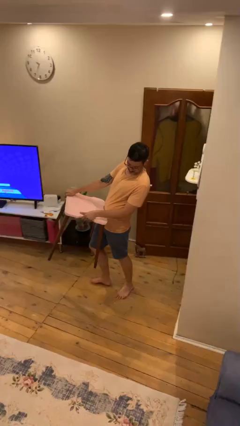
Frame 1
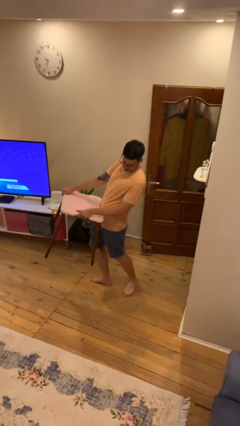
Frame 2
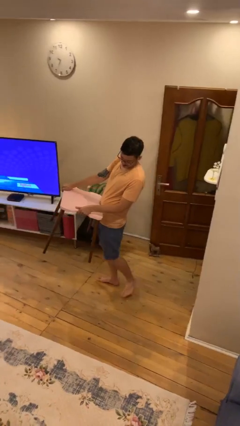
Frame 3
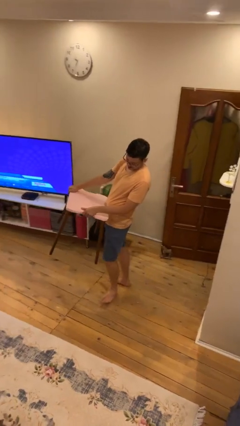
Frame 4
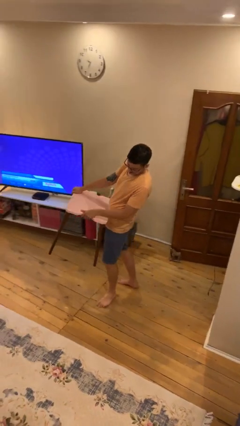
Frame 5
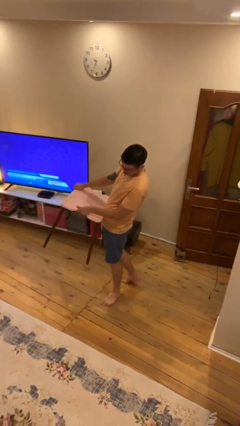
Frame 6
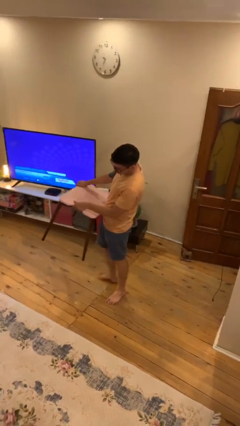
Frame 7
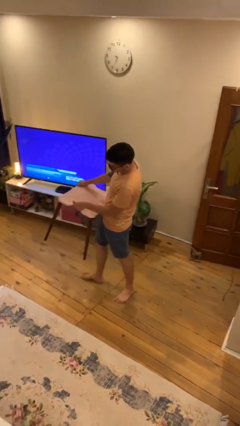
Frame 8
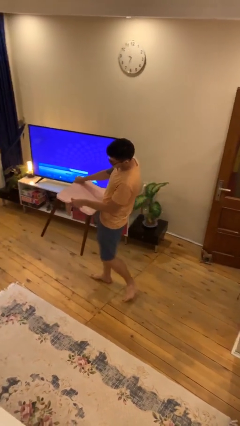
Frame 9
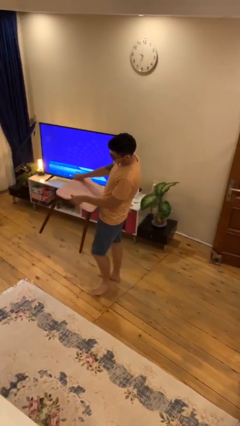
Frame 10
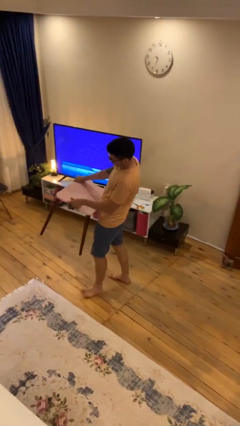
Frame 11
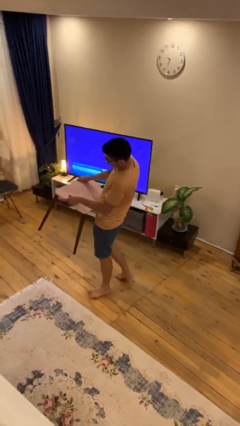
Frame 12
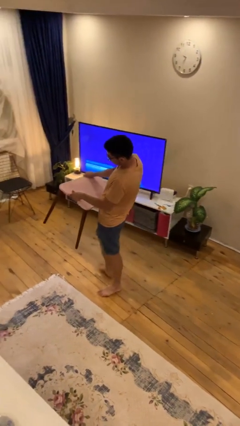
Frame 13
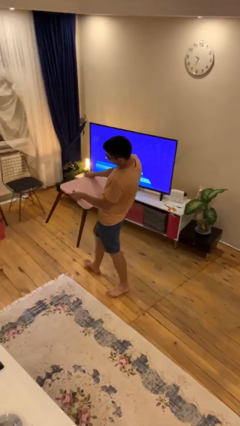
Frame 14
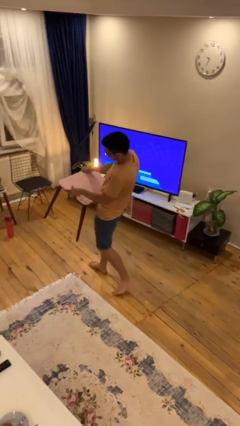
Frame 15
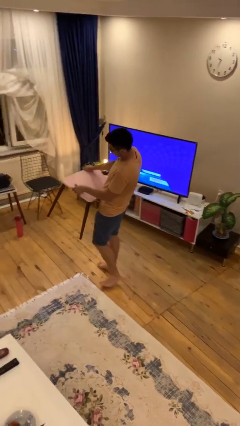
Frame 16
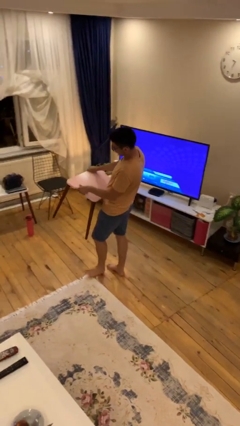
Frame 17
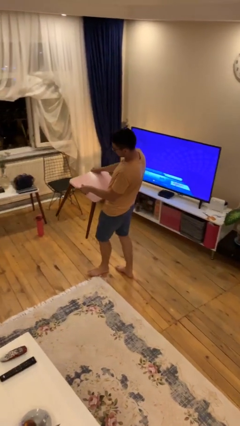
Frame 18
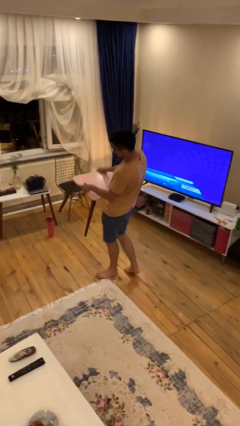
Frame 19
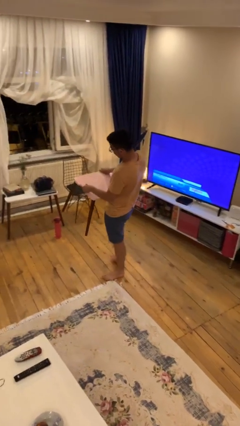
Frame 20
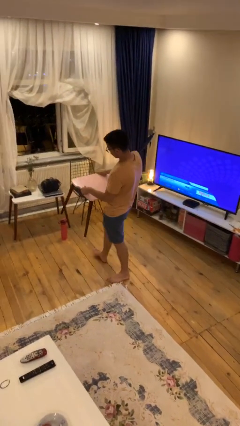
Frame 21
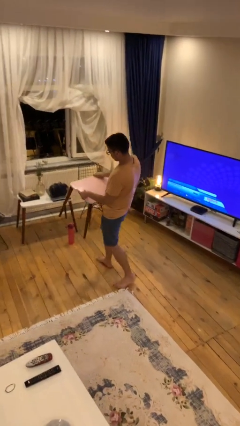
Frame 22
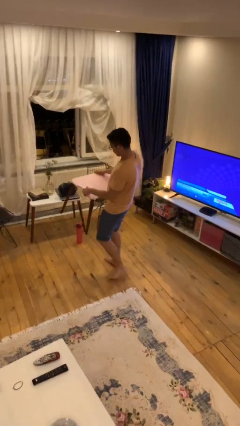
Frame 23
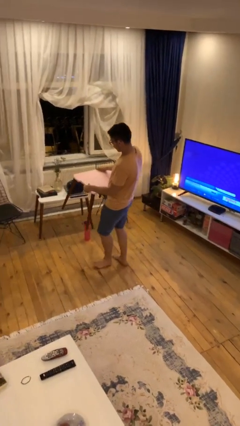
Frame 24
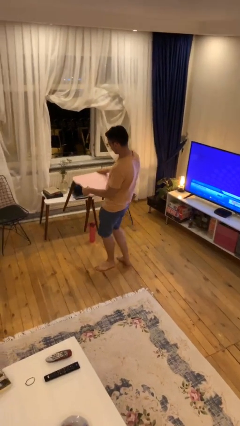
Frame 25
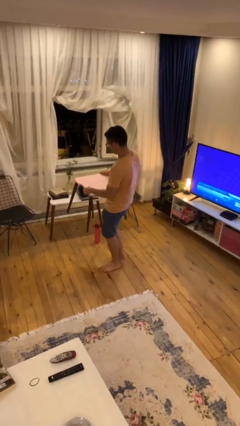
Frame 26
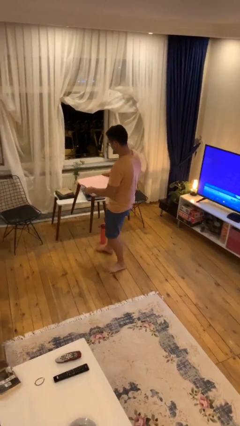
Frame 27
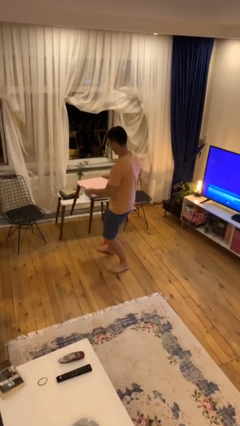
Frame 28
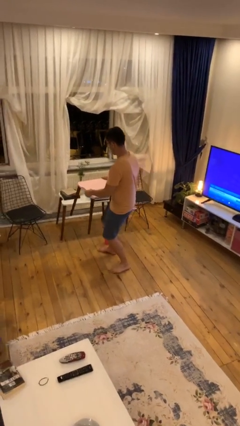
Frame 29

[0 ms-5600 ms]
person carries heavy object

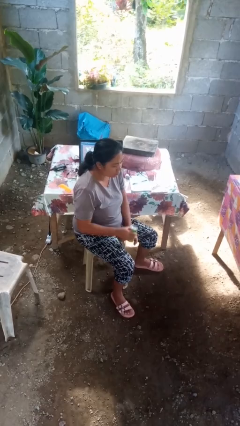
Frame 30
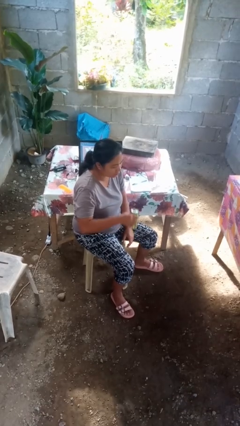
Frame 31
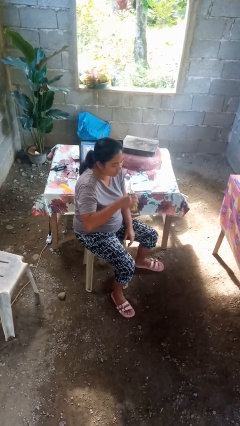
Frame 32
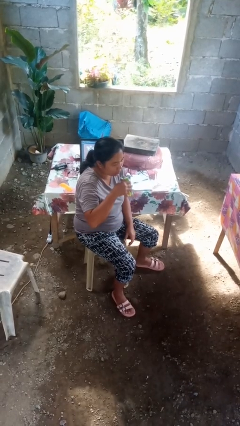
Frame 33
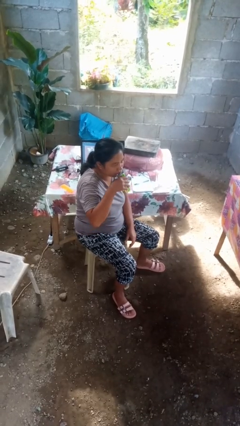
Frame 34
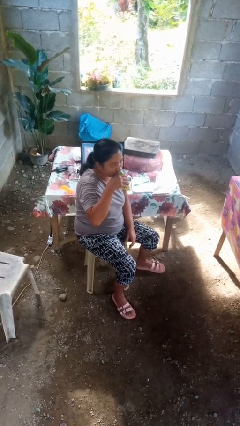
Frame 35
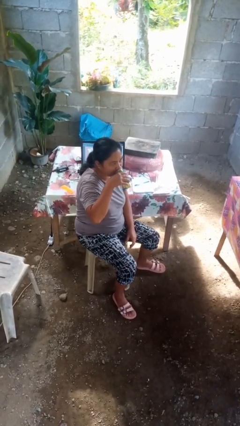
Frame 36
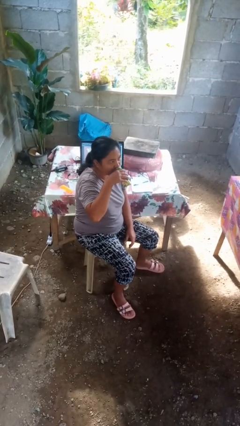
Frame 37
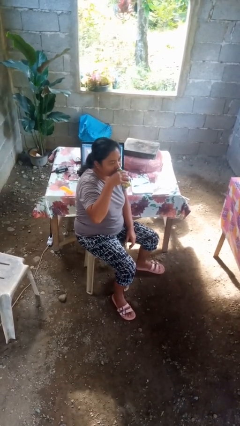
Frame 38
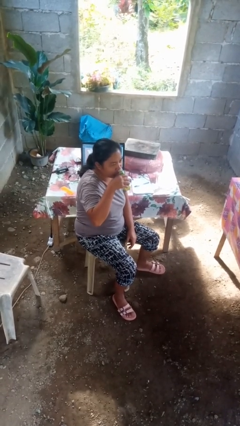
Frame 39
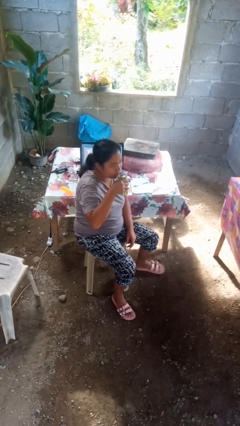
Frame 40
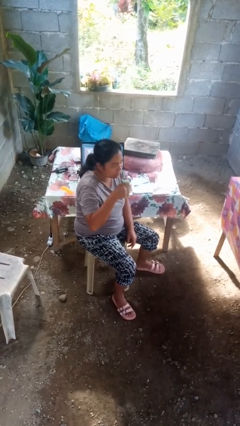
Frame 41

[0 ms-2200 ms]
person drinks from beverage can

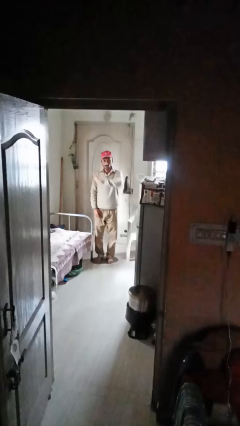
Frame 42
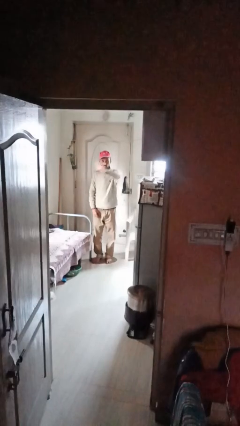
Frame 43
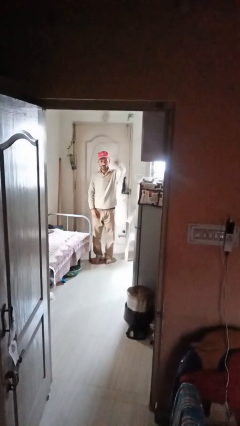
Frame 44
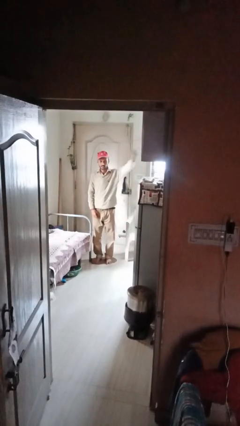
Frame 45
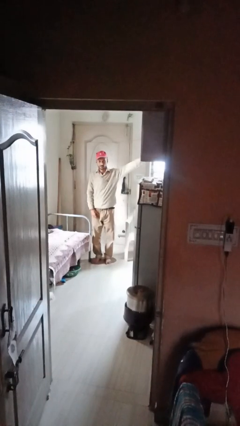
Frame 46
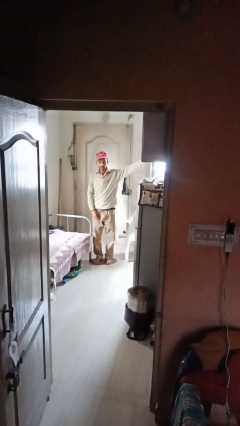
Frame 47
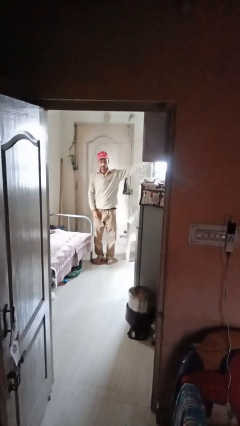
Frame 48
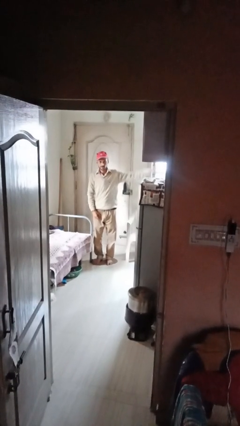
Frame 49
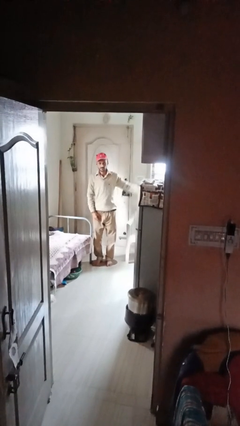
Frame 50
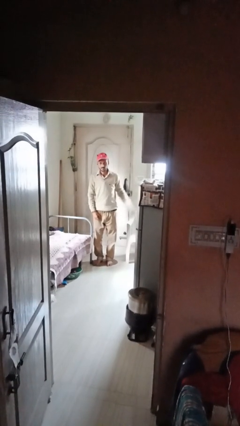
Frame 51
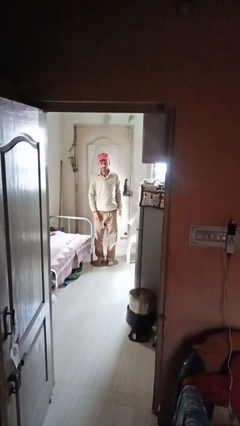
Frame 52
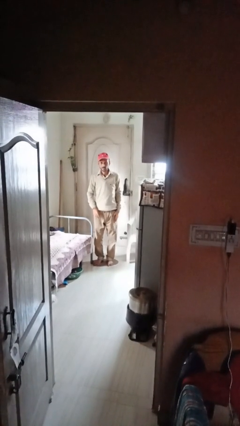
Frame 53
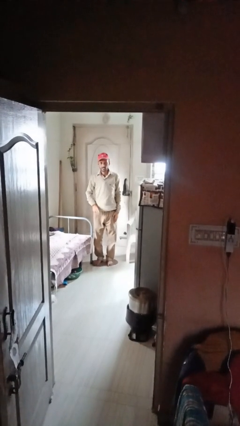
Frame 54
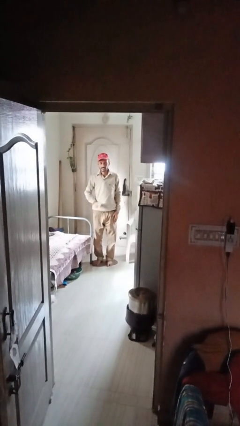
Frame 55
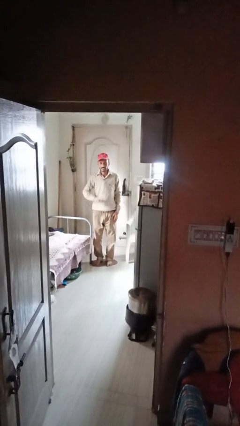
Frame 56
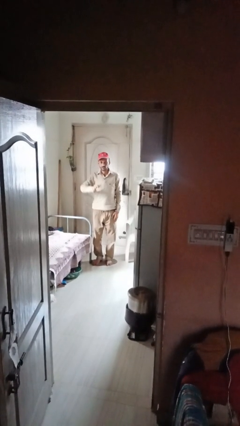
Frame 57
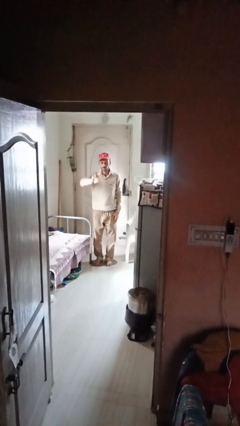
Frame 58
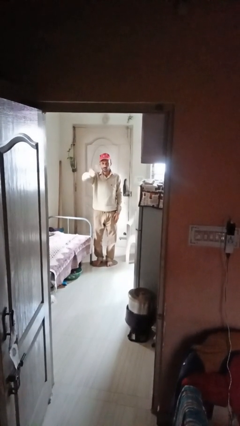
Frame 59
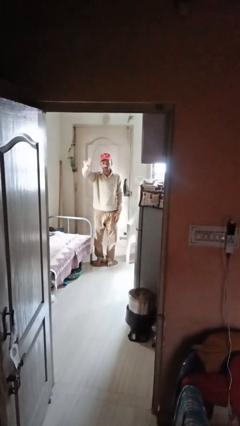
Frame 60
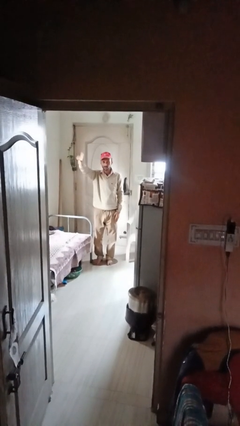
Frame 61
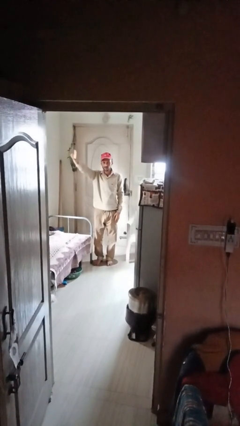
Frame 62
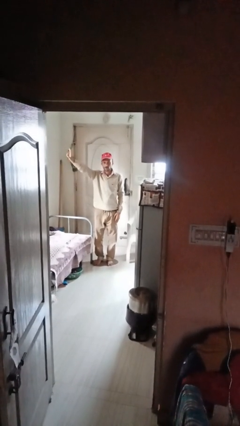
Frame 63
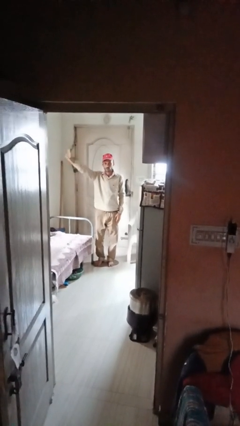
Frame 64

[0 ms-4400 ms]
person gestures swipe left

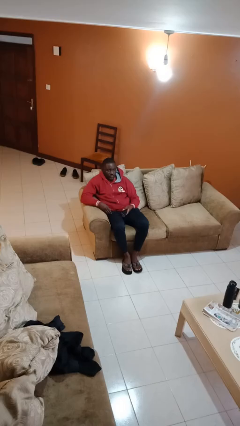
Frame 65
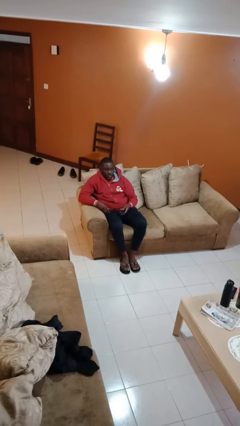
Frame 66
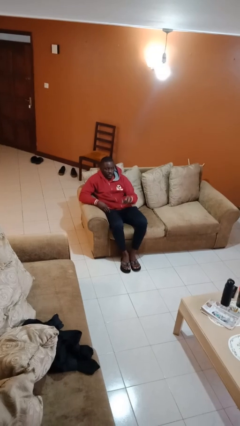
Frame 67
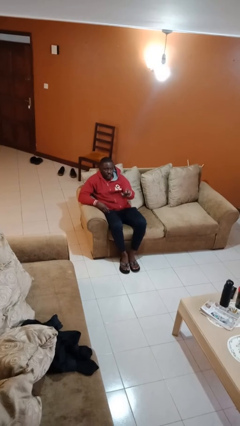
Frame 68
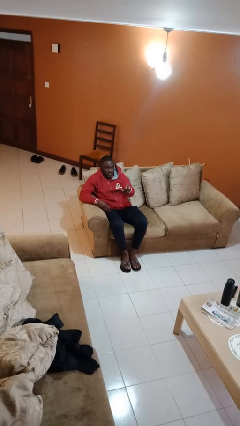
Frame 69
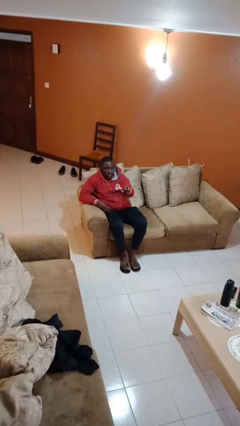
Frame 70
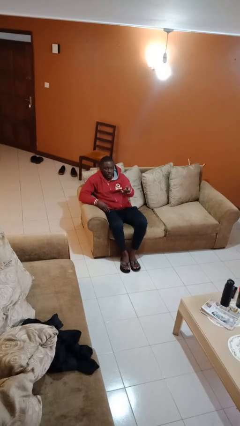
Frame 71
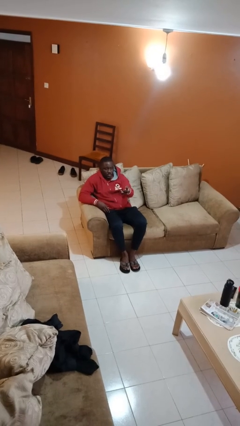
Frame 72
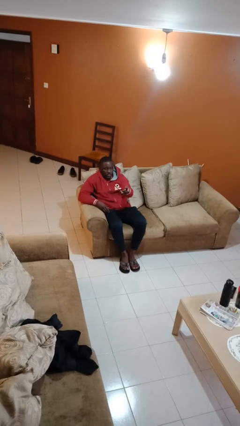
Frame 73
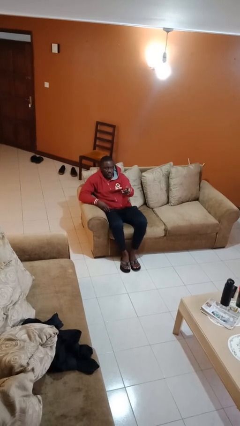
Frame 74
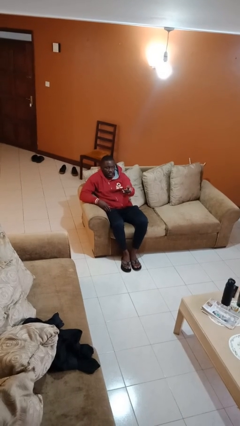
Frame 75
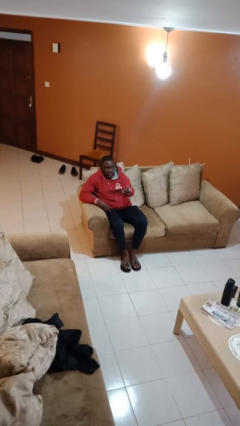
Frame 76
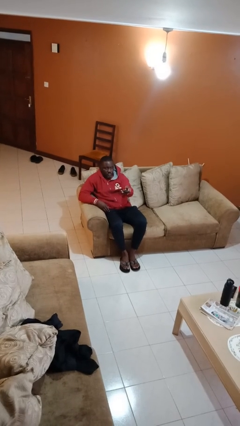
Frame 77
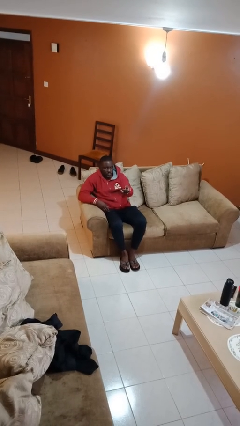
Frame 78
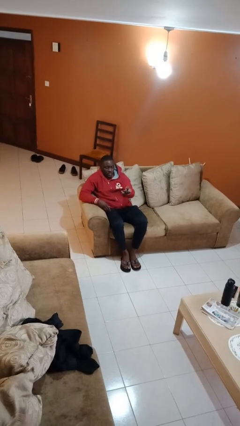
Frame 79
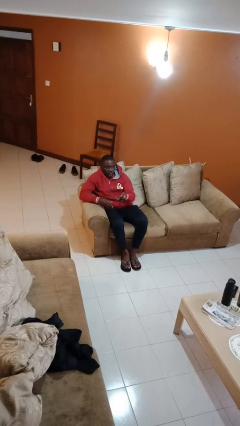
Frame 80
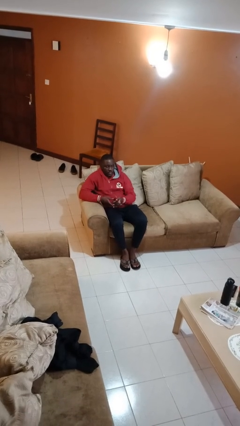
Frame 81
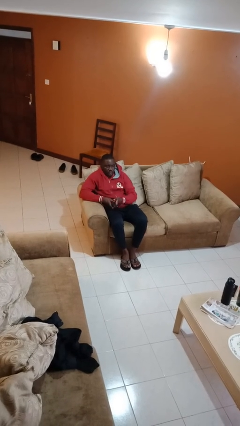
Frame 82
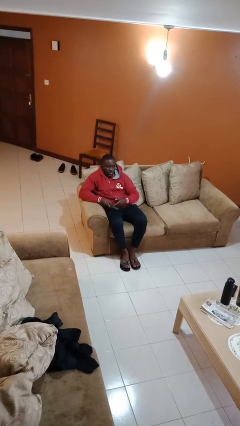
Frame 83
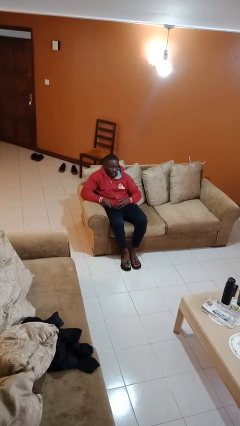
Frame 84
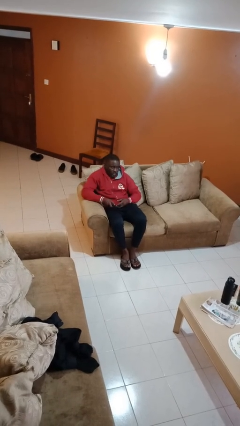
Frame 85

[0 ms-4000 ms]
person uses television remote

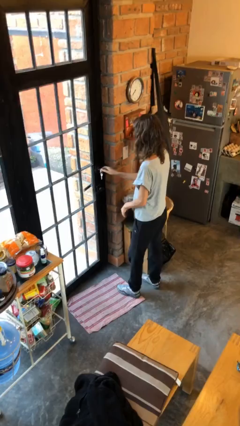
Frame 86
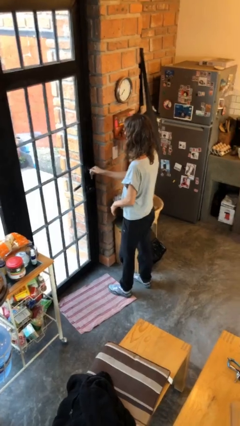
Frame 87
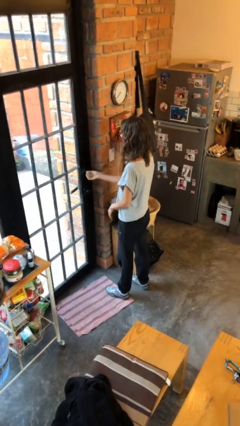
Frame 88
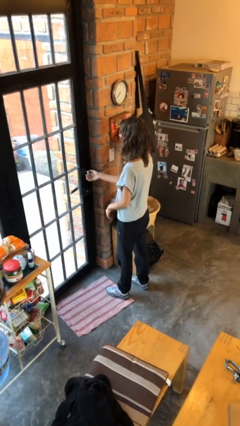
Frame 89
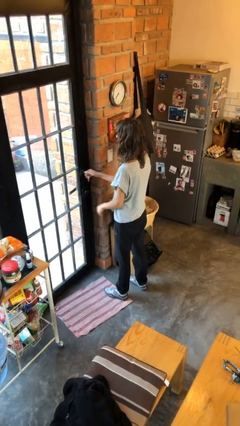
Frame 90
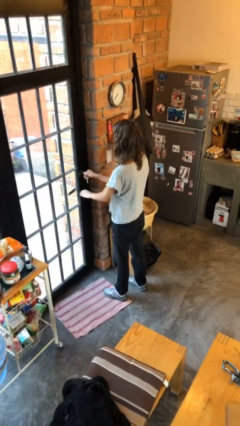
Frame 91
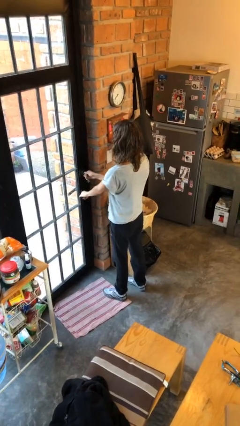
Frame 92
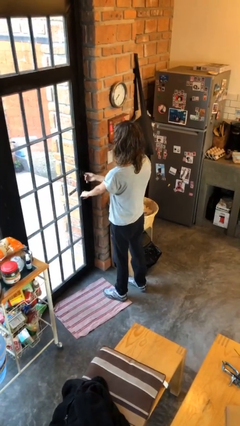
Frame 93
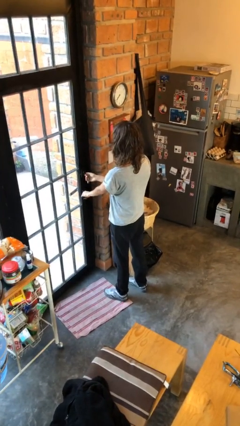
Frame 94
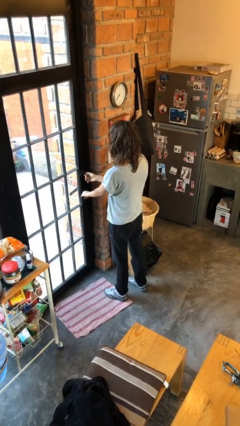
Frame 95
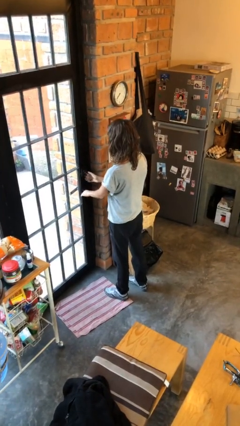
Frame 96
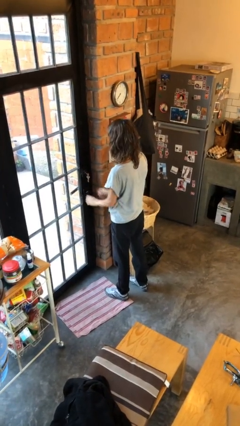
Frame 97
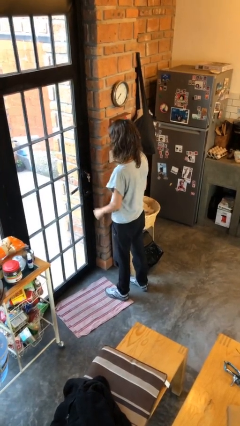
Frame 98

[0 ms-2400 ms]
person locks door with keys
